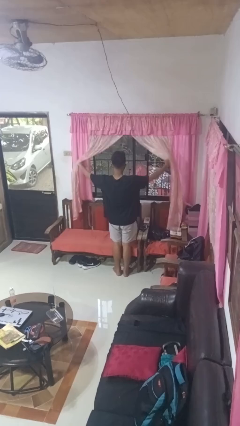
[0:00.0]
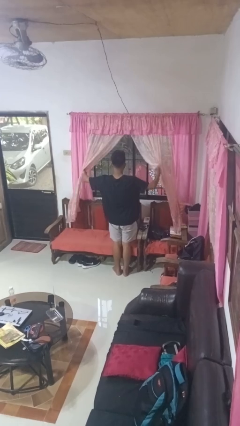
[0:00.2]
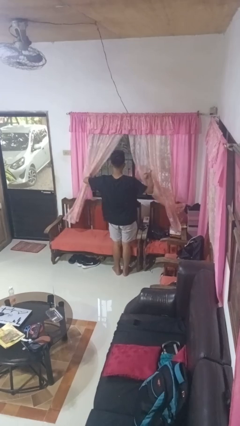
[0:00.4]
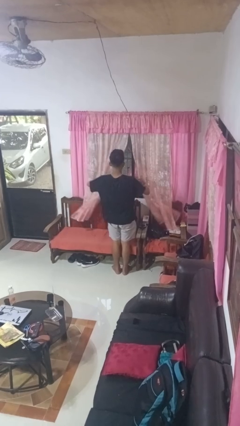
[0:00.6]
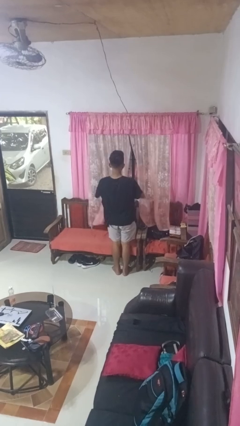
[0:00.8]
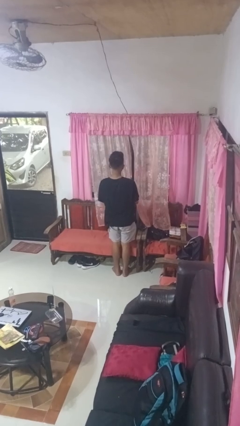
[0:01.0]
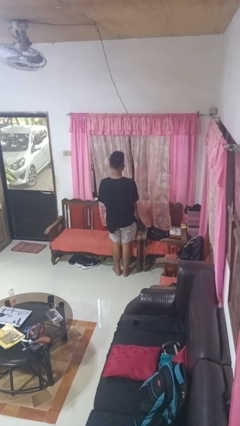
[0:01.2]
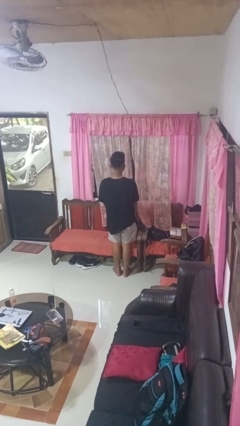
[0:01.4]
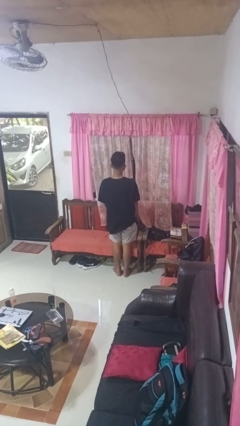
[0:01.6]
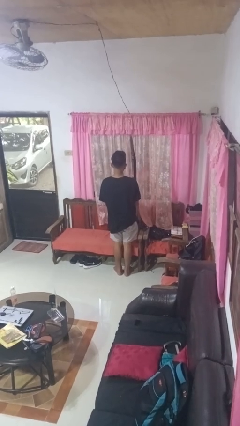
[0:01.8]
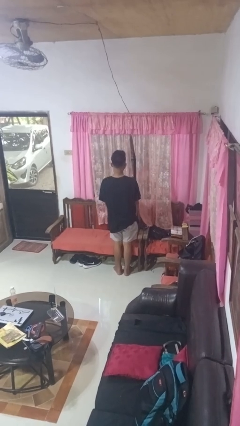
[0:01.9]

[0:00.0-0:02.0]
person closes curtains

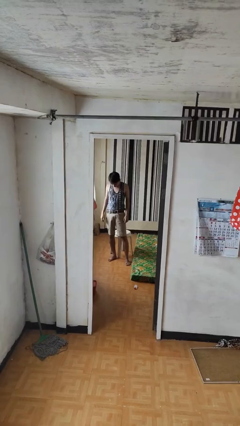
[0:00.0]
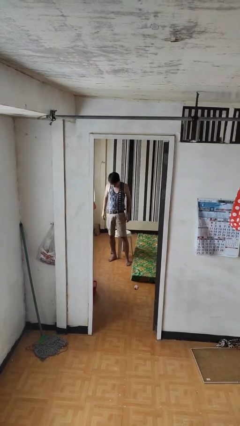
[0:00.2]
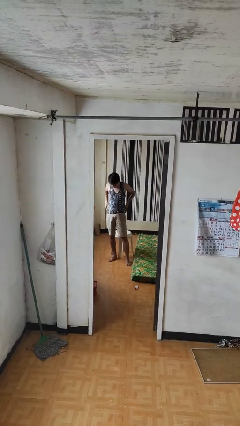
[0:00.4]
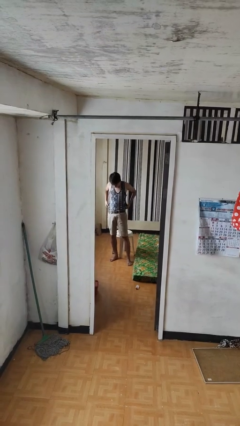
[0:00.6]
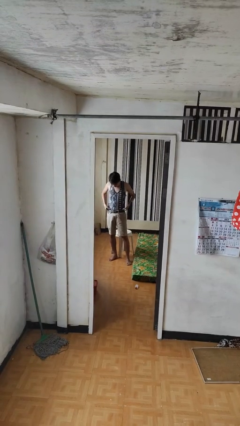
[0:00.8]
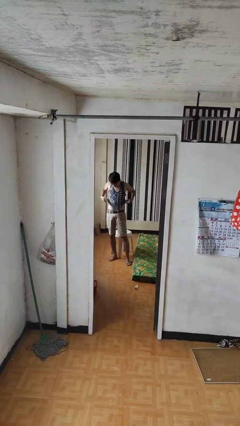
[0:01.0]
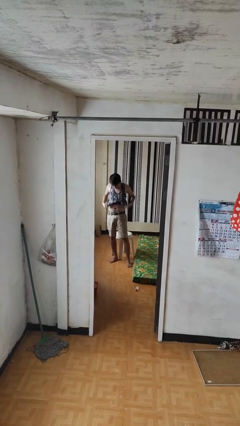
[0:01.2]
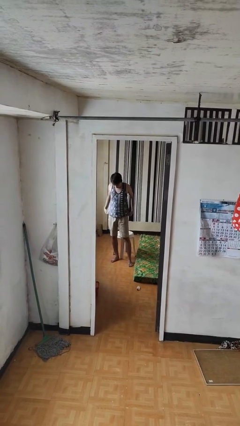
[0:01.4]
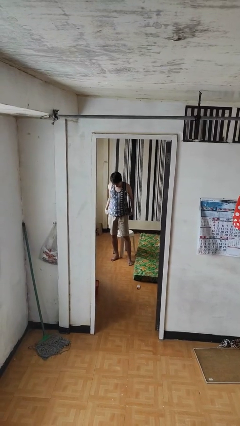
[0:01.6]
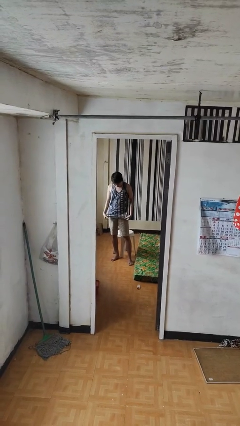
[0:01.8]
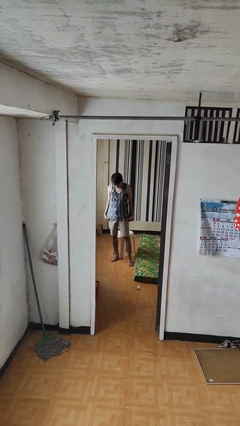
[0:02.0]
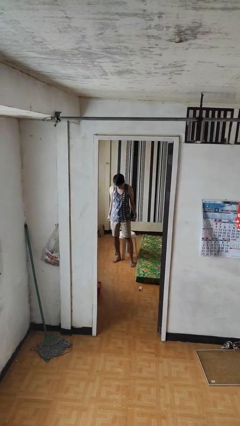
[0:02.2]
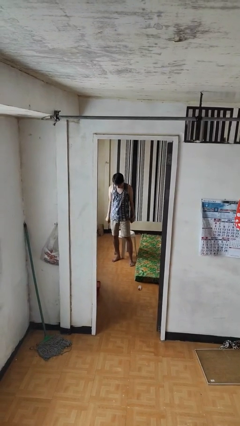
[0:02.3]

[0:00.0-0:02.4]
person untucks shirt

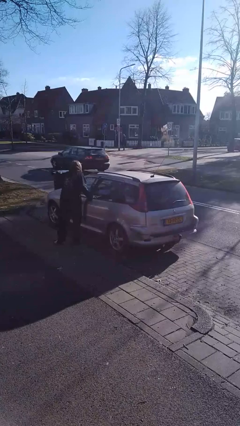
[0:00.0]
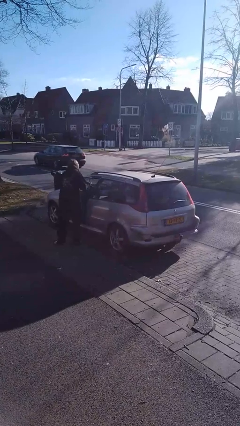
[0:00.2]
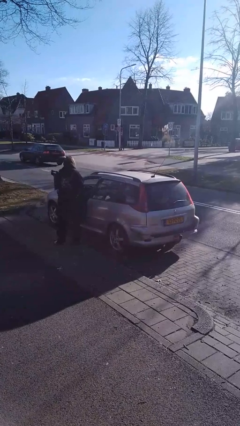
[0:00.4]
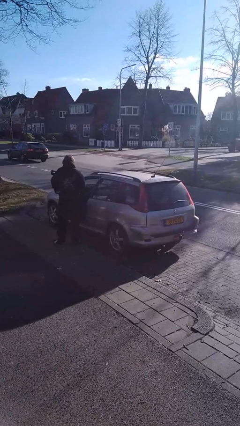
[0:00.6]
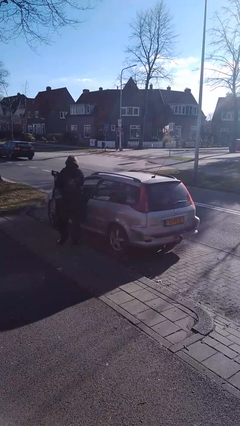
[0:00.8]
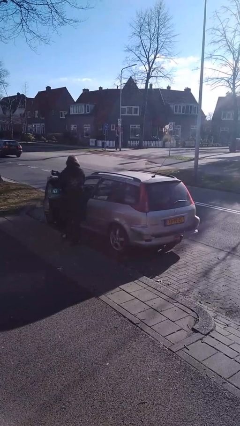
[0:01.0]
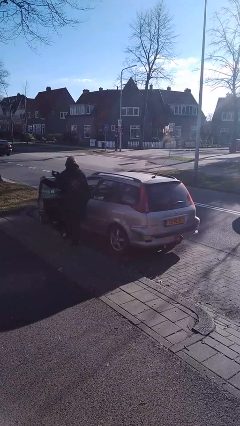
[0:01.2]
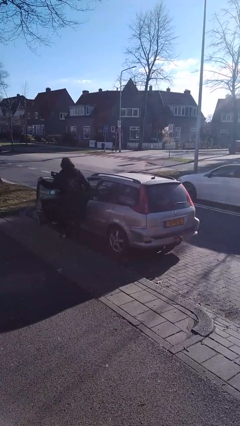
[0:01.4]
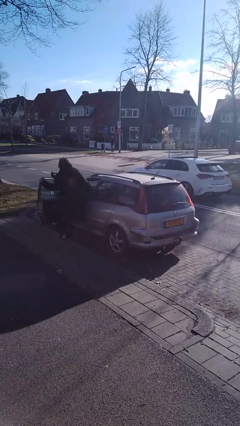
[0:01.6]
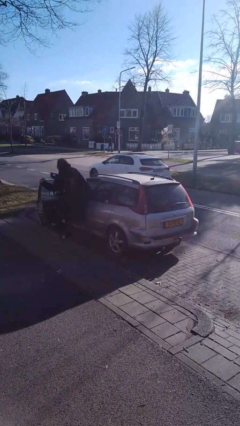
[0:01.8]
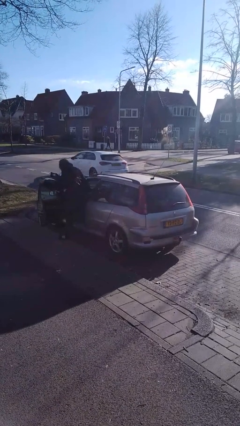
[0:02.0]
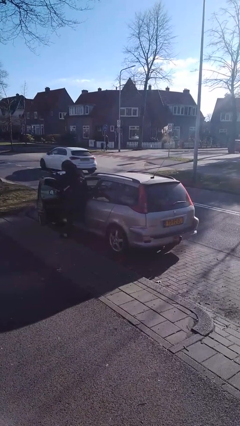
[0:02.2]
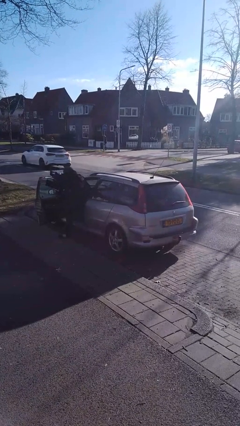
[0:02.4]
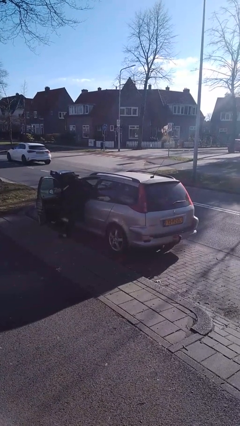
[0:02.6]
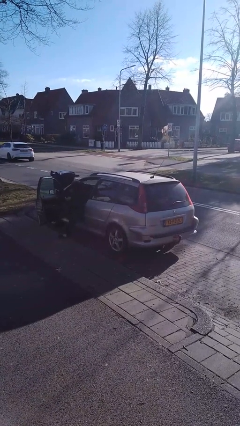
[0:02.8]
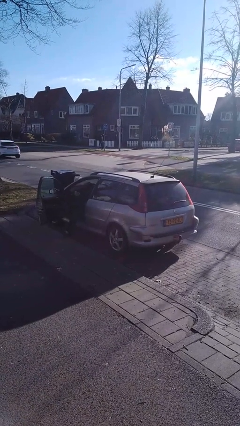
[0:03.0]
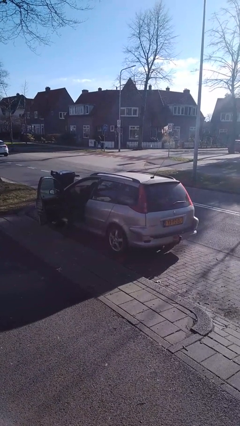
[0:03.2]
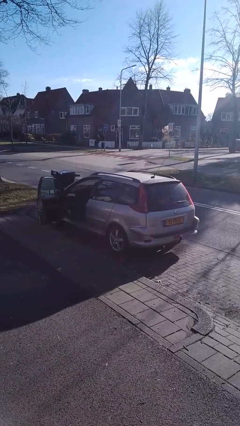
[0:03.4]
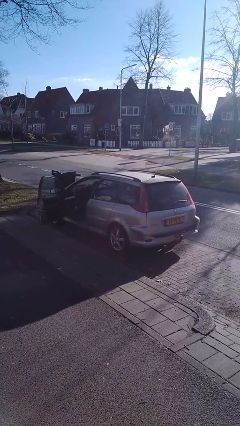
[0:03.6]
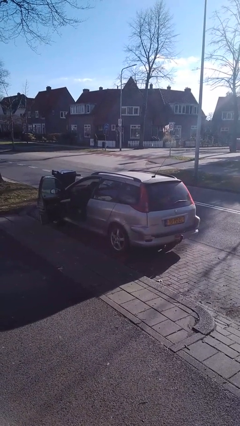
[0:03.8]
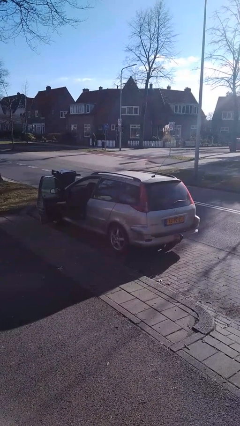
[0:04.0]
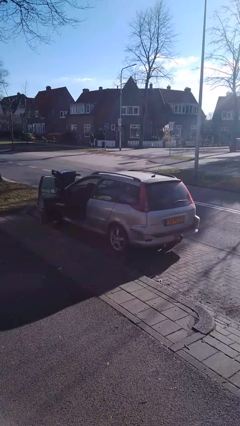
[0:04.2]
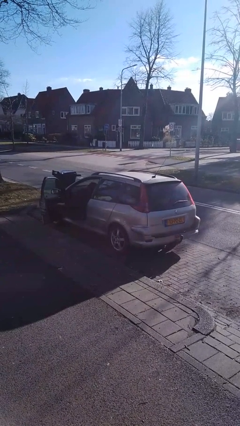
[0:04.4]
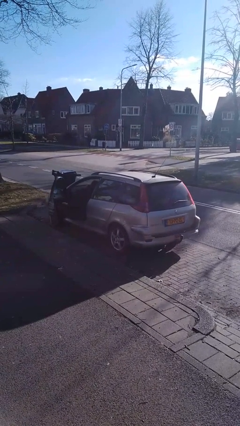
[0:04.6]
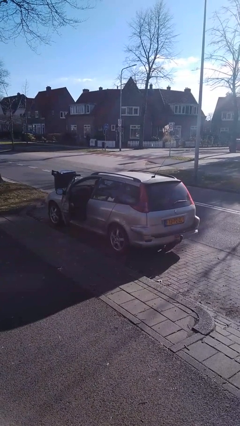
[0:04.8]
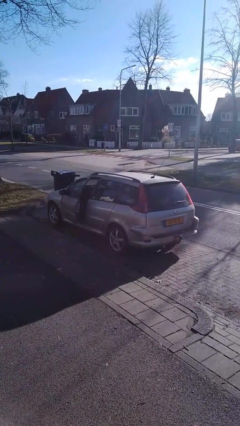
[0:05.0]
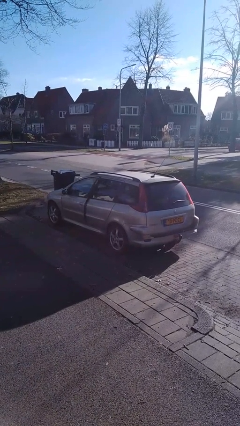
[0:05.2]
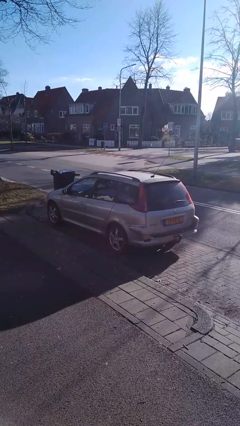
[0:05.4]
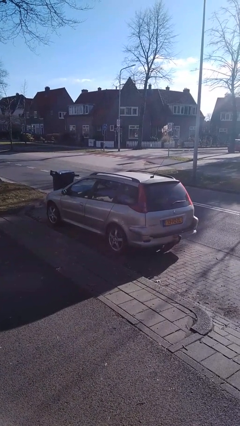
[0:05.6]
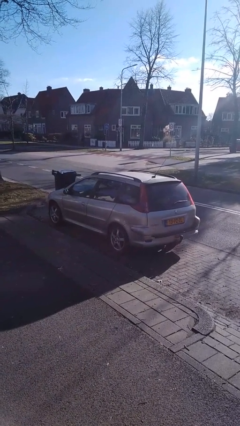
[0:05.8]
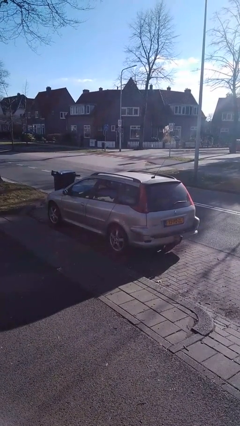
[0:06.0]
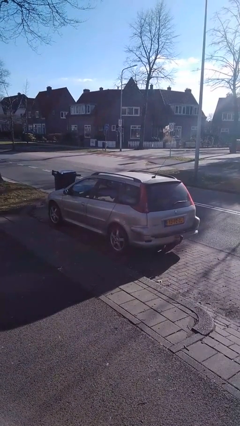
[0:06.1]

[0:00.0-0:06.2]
car picks up person

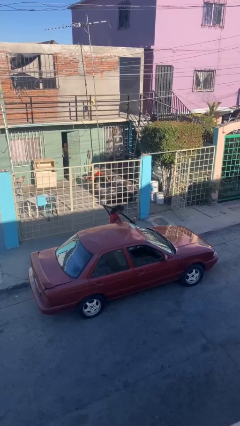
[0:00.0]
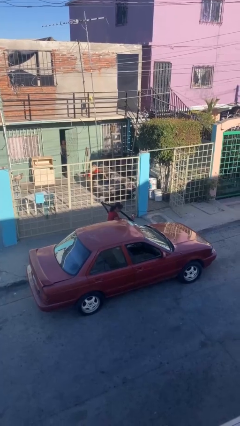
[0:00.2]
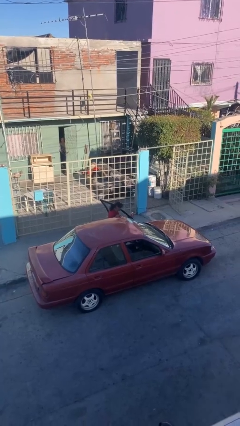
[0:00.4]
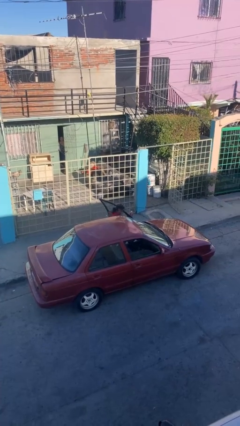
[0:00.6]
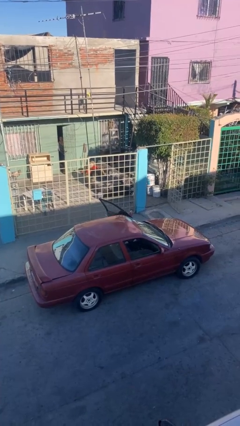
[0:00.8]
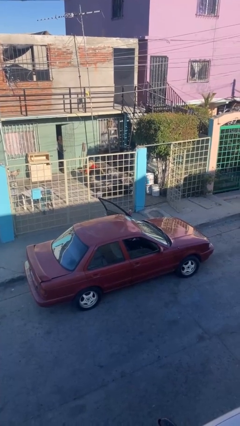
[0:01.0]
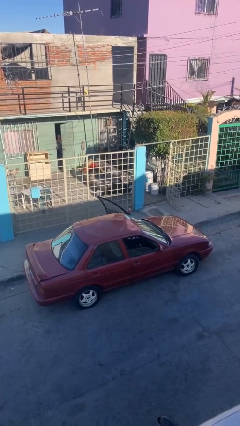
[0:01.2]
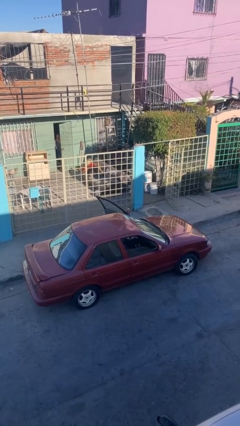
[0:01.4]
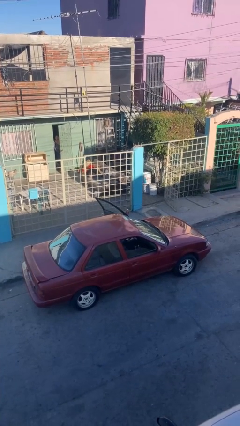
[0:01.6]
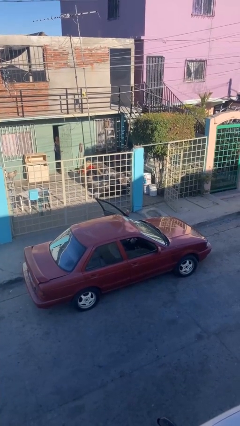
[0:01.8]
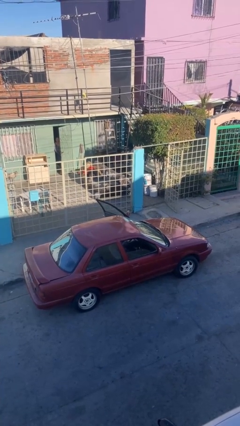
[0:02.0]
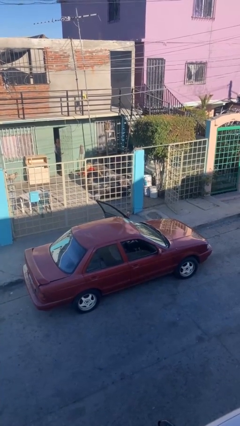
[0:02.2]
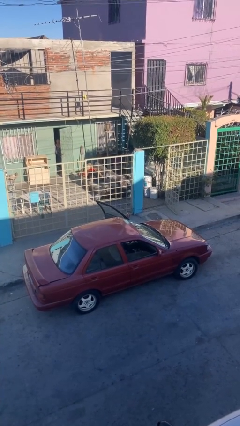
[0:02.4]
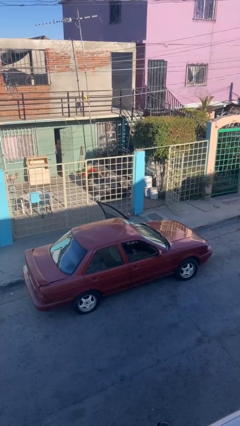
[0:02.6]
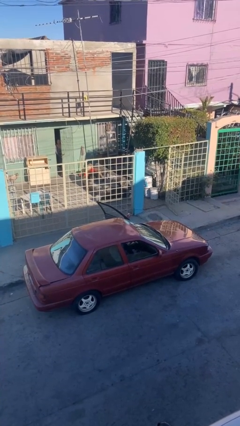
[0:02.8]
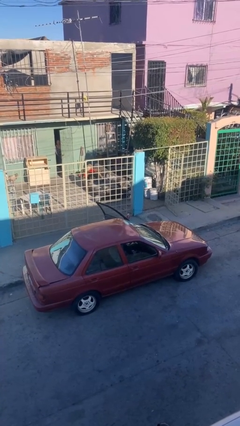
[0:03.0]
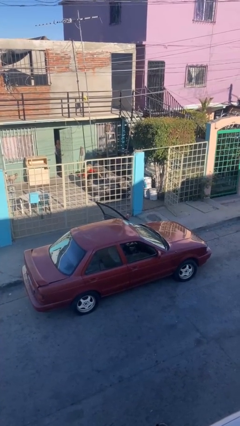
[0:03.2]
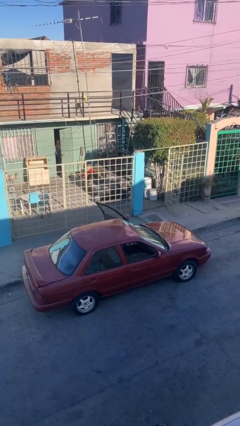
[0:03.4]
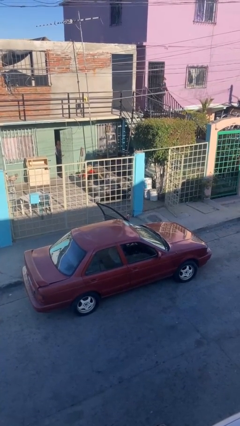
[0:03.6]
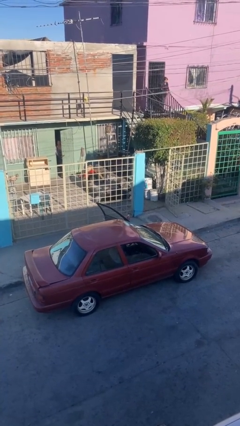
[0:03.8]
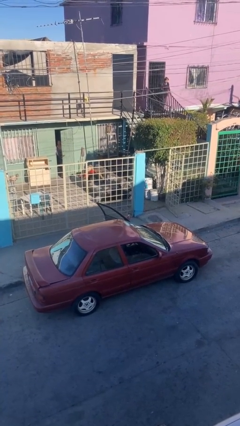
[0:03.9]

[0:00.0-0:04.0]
person enters car

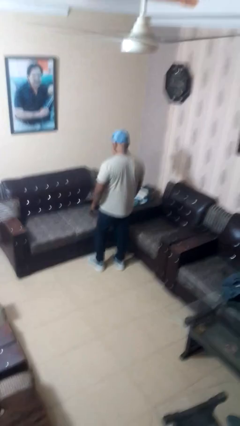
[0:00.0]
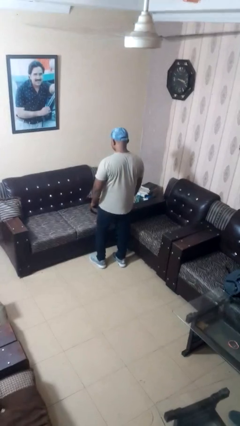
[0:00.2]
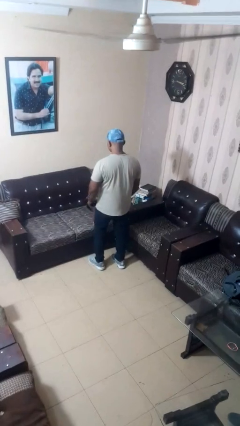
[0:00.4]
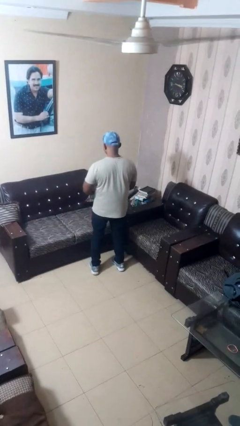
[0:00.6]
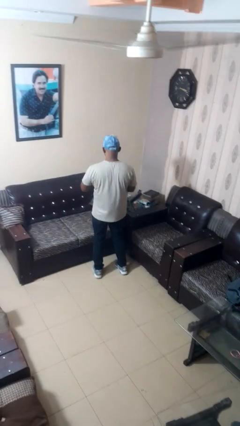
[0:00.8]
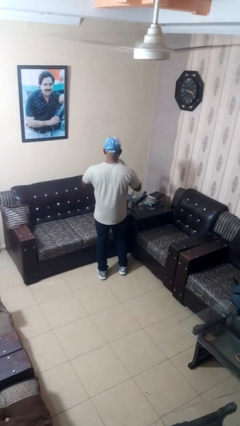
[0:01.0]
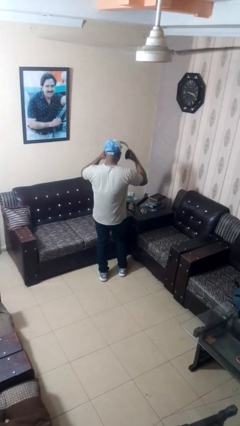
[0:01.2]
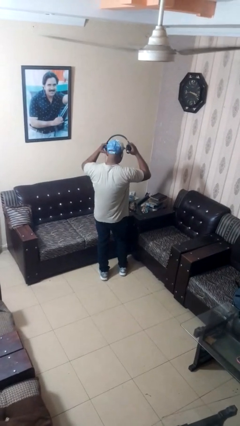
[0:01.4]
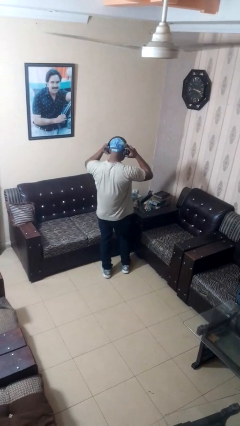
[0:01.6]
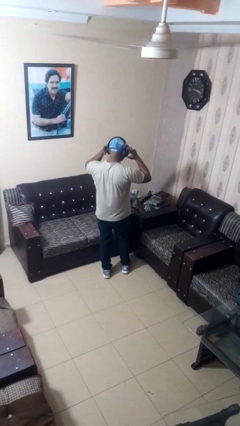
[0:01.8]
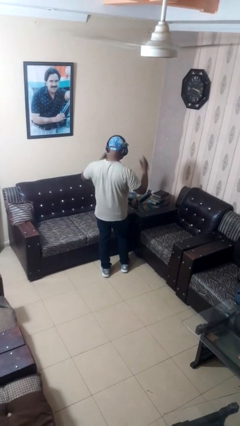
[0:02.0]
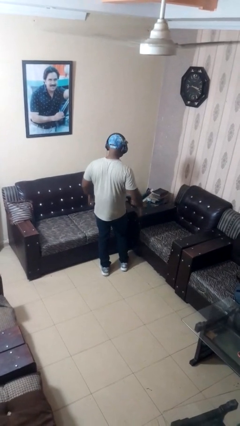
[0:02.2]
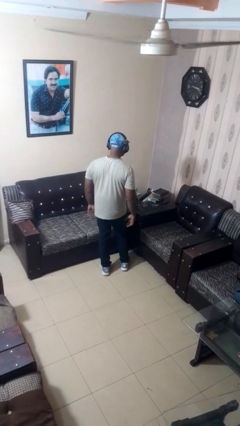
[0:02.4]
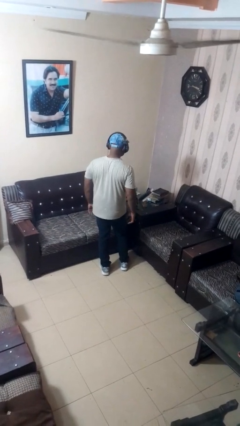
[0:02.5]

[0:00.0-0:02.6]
person puts on headphones

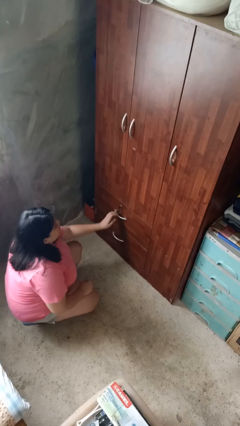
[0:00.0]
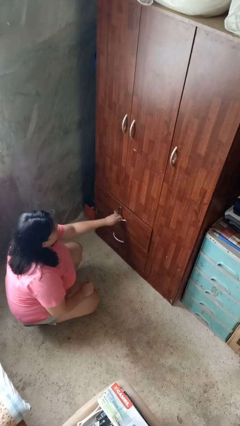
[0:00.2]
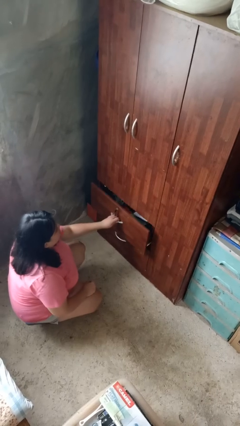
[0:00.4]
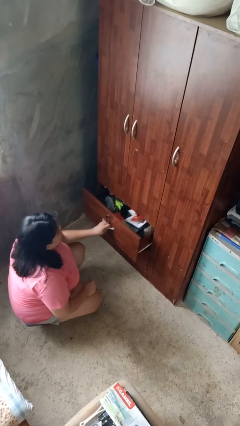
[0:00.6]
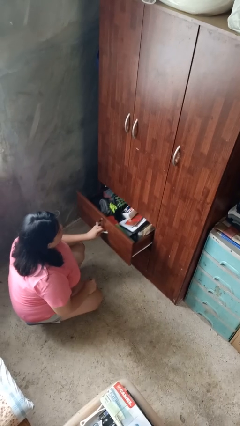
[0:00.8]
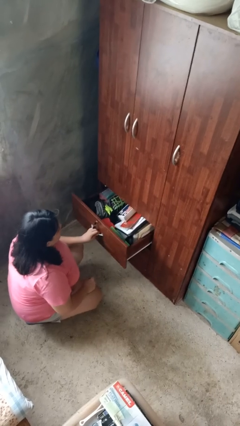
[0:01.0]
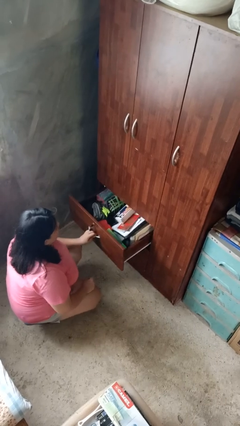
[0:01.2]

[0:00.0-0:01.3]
person opens dresser drawer
